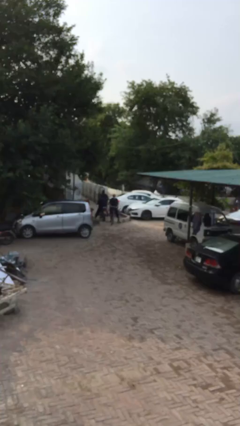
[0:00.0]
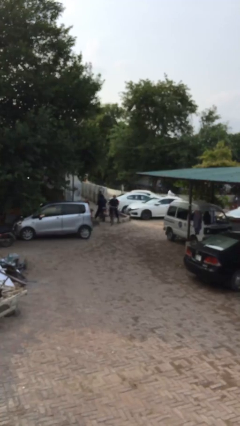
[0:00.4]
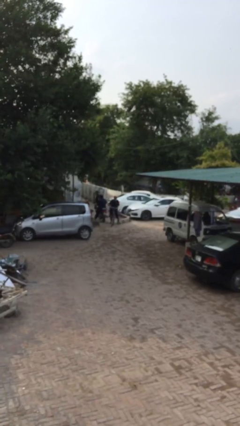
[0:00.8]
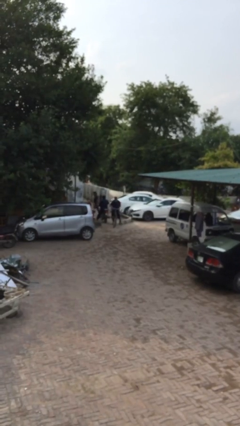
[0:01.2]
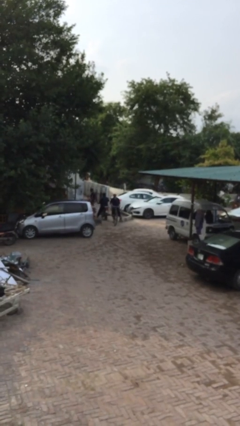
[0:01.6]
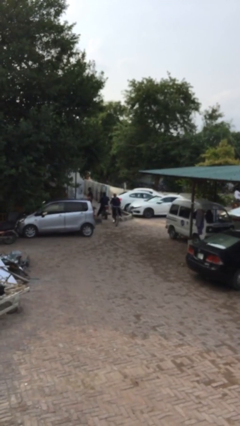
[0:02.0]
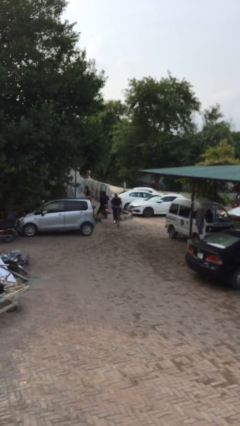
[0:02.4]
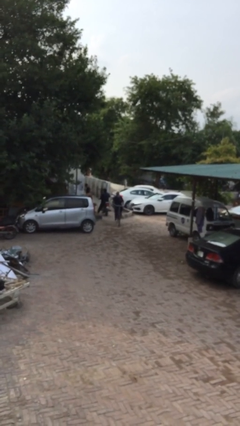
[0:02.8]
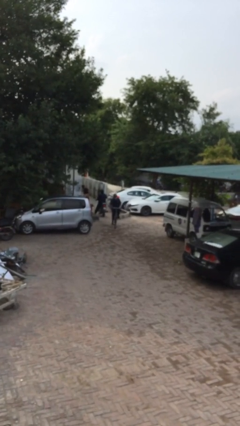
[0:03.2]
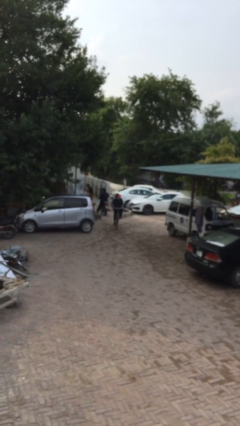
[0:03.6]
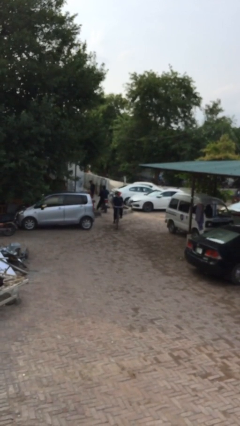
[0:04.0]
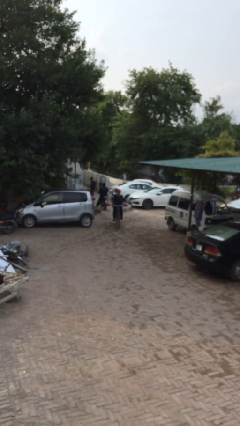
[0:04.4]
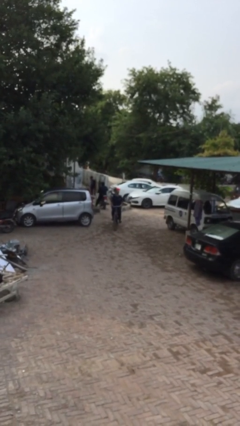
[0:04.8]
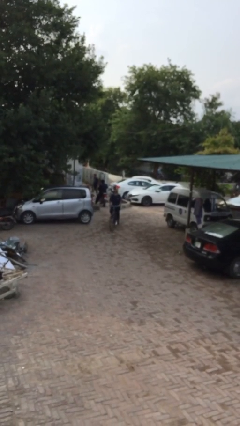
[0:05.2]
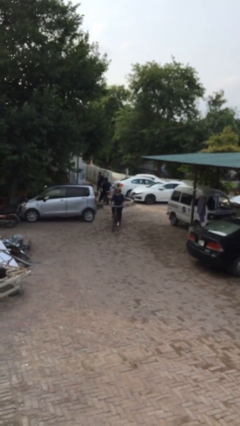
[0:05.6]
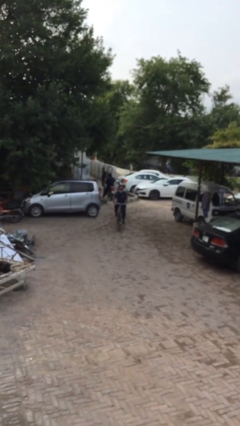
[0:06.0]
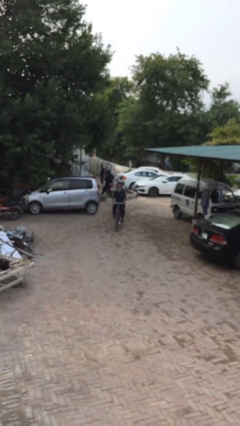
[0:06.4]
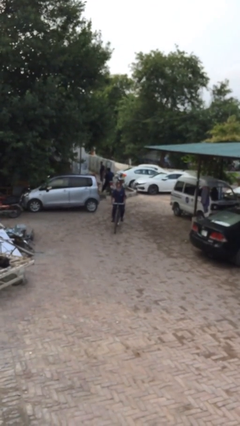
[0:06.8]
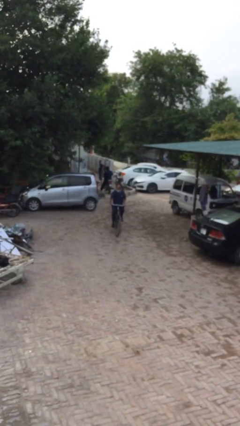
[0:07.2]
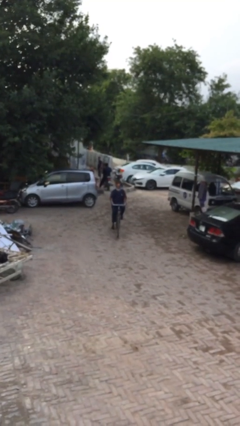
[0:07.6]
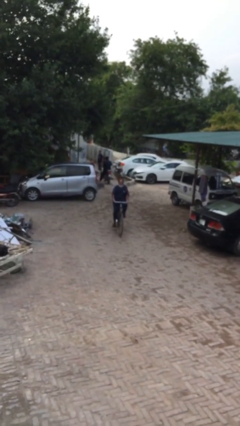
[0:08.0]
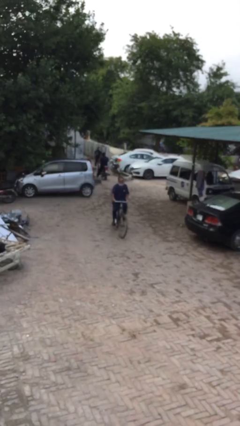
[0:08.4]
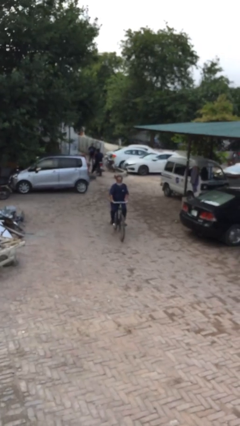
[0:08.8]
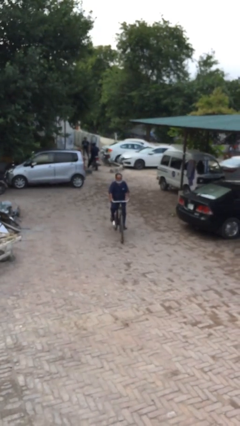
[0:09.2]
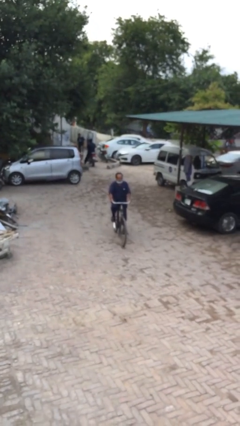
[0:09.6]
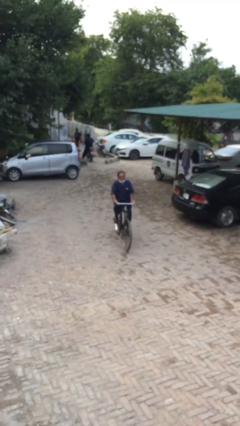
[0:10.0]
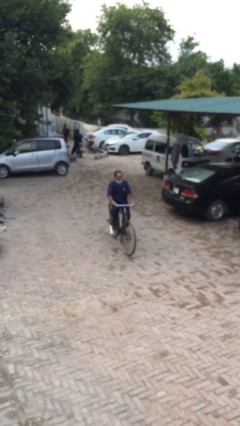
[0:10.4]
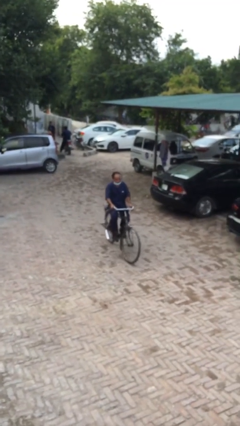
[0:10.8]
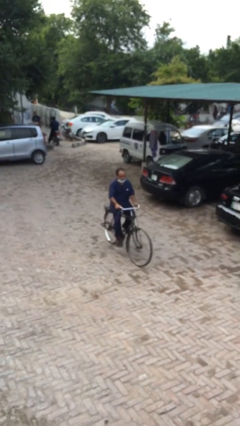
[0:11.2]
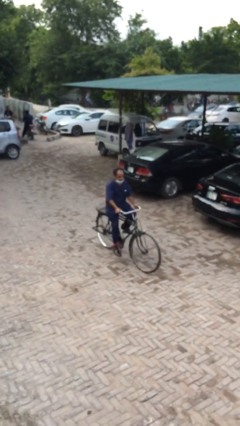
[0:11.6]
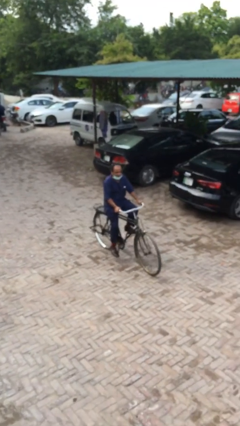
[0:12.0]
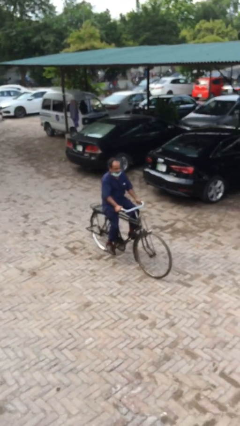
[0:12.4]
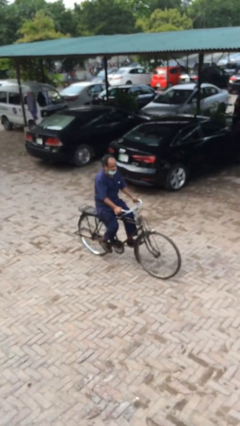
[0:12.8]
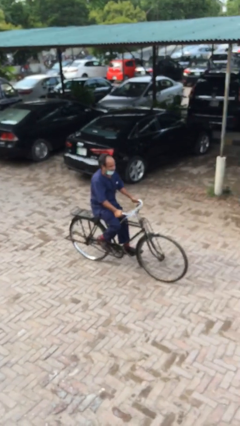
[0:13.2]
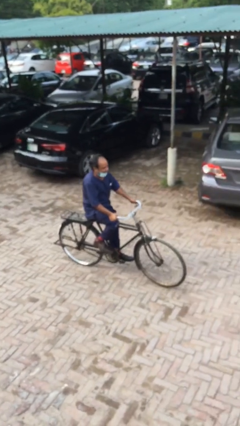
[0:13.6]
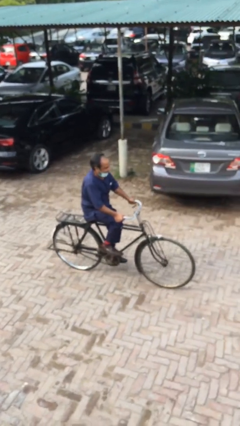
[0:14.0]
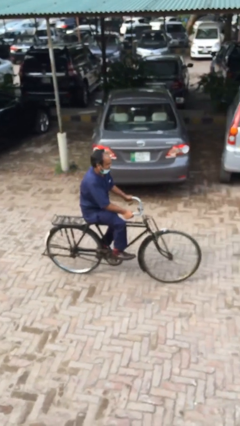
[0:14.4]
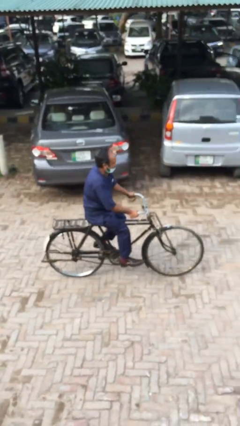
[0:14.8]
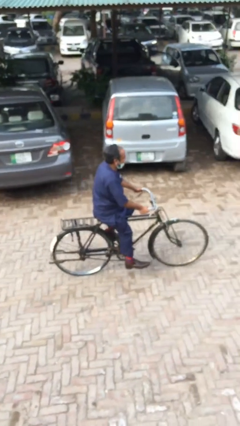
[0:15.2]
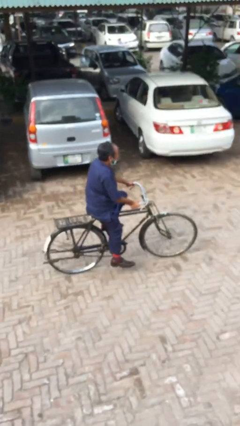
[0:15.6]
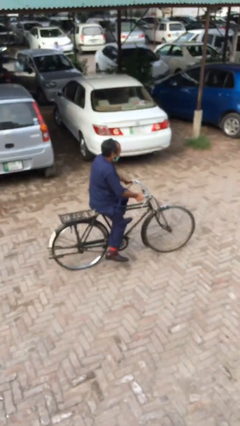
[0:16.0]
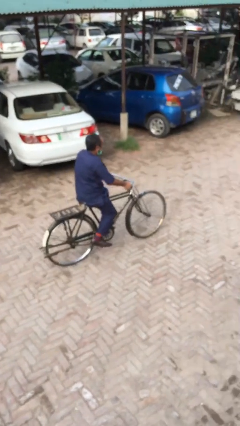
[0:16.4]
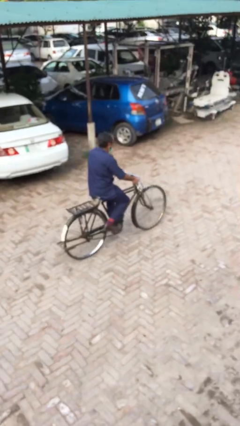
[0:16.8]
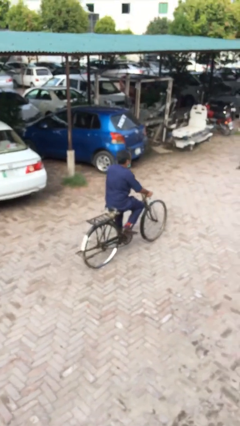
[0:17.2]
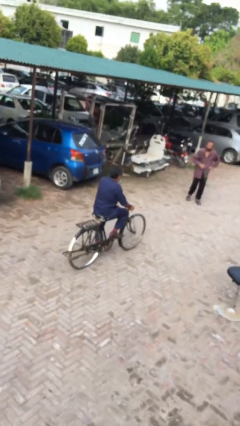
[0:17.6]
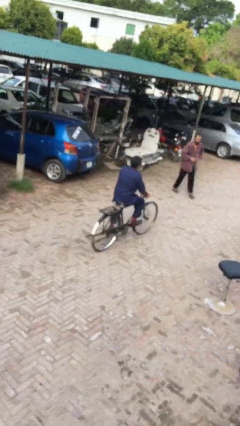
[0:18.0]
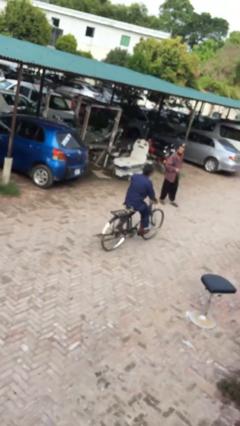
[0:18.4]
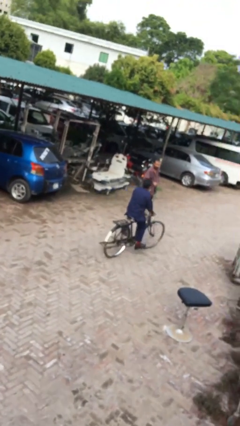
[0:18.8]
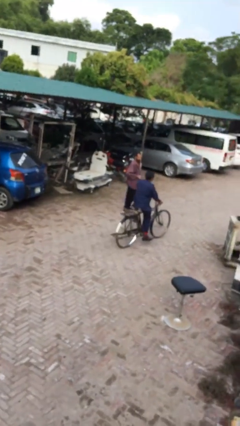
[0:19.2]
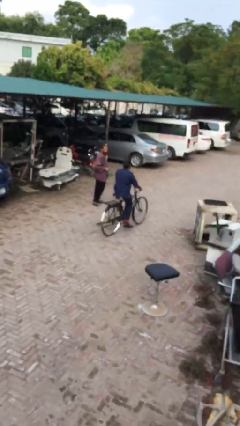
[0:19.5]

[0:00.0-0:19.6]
person rides bicycle

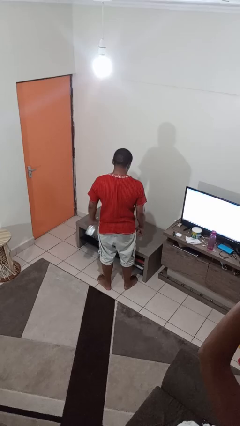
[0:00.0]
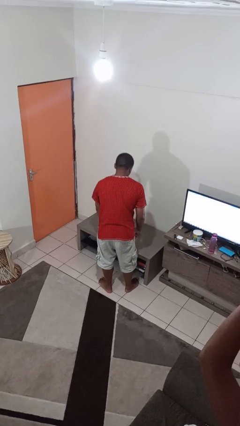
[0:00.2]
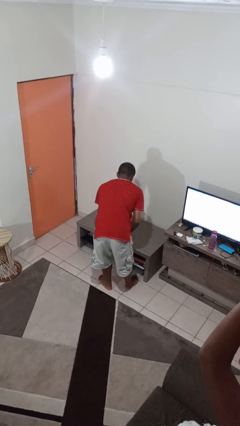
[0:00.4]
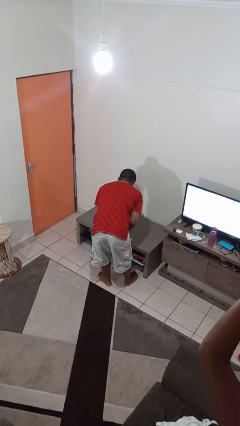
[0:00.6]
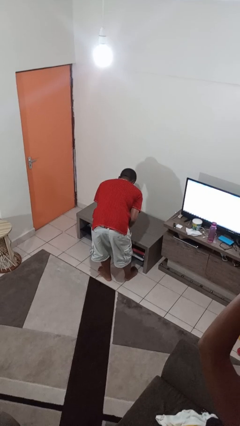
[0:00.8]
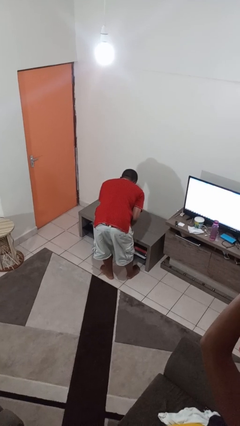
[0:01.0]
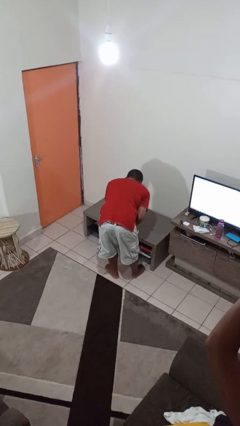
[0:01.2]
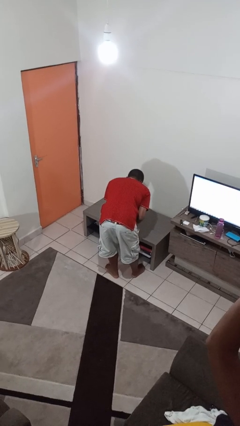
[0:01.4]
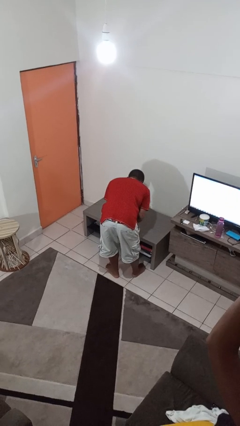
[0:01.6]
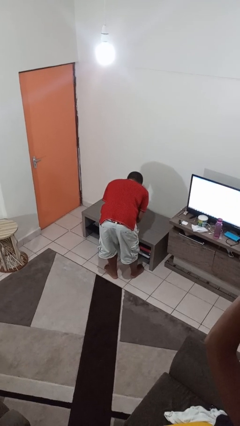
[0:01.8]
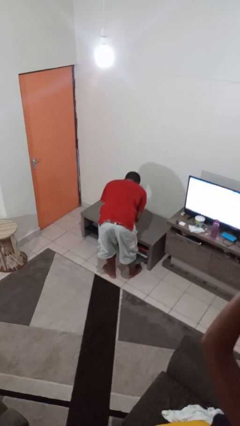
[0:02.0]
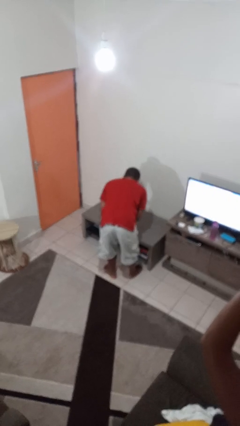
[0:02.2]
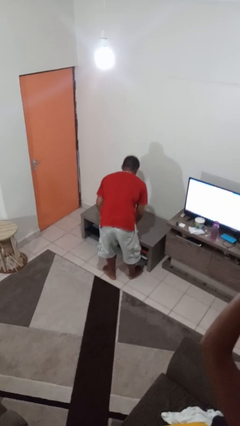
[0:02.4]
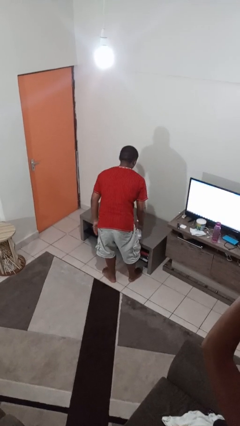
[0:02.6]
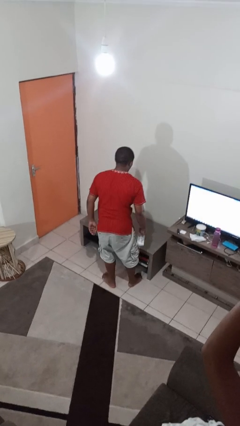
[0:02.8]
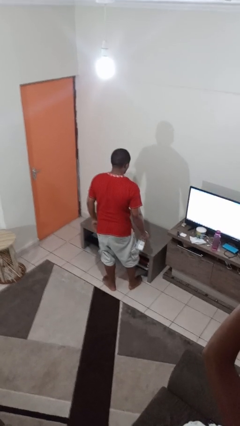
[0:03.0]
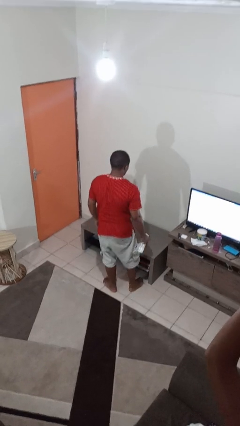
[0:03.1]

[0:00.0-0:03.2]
person sprays from bottle

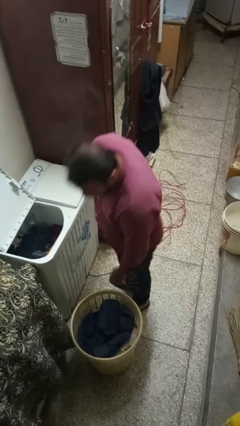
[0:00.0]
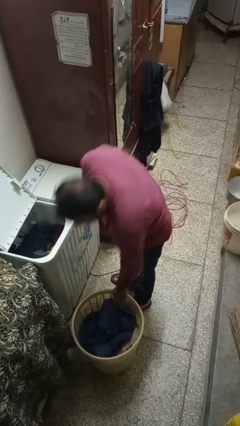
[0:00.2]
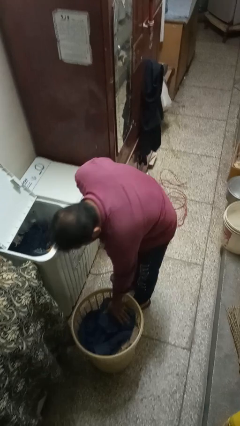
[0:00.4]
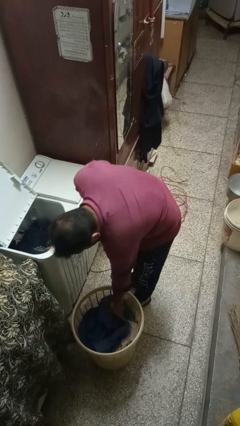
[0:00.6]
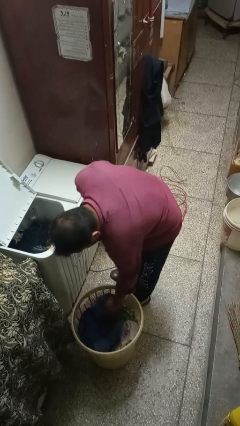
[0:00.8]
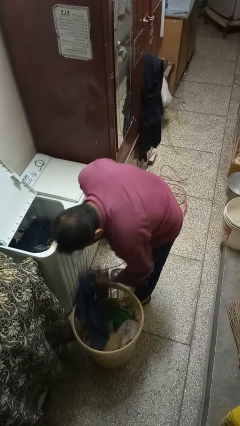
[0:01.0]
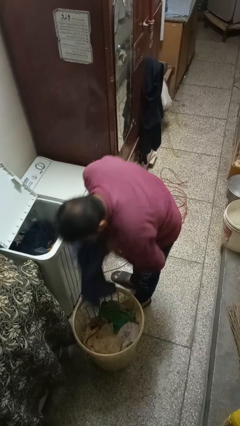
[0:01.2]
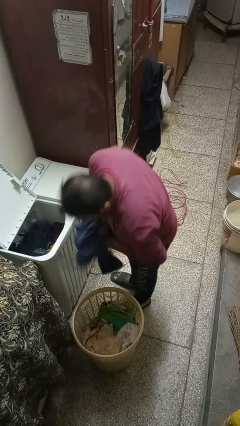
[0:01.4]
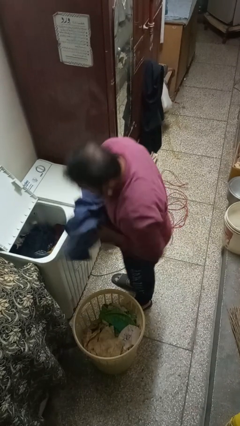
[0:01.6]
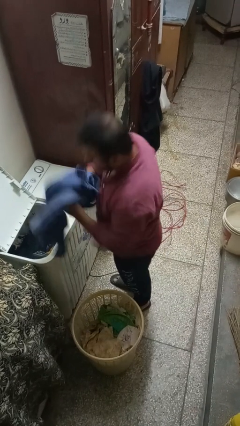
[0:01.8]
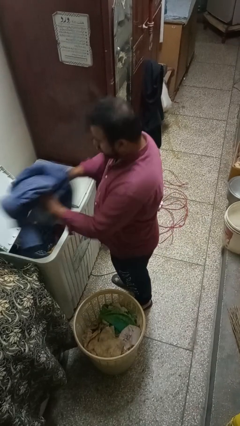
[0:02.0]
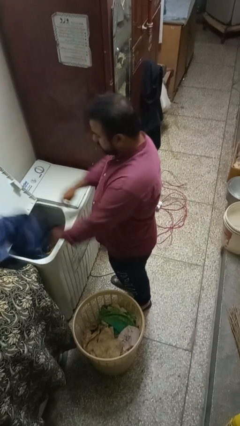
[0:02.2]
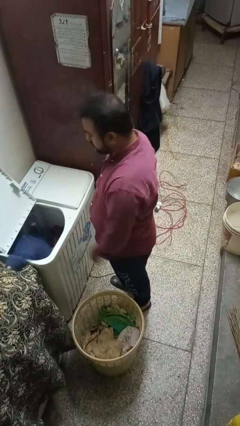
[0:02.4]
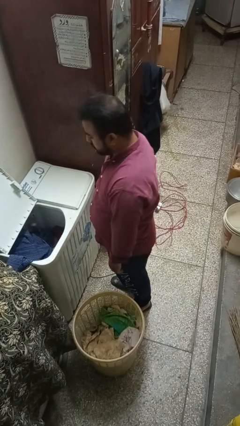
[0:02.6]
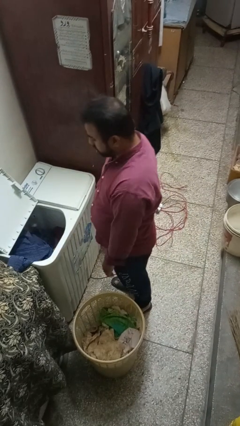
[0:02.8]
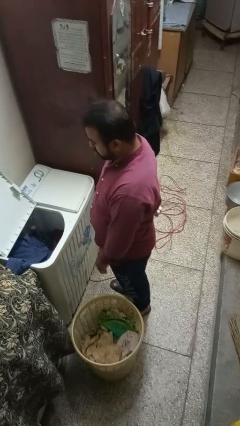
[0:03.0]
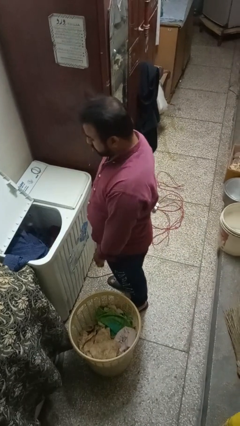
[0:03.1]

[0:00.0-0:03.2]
person loads clotheswasher

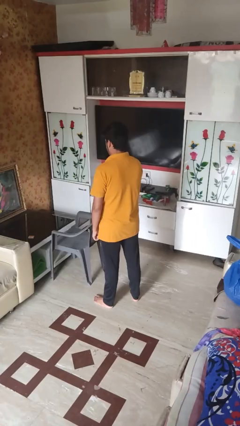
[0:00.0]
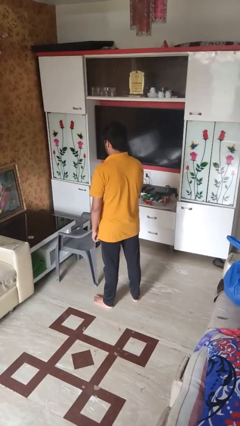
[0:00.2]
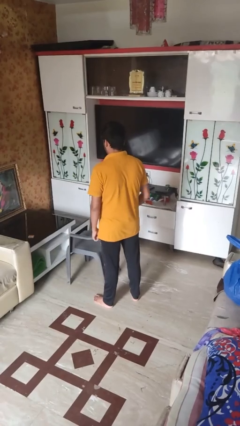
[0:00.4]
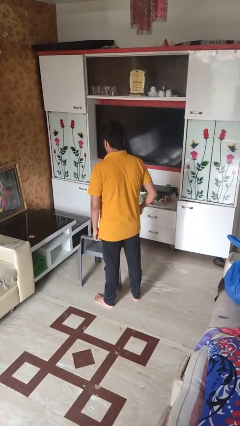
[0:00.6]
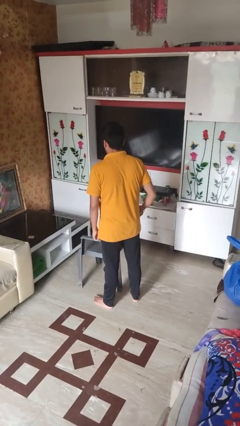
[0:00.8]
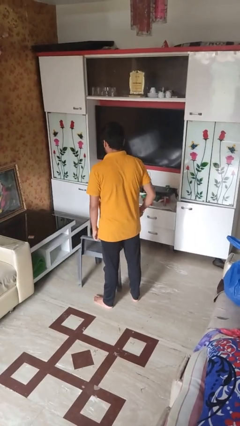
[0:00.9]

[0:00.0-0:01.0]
person pulls out chair

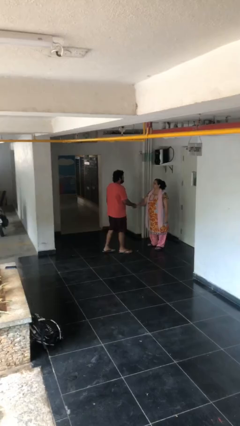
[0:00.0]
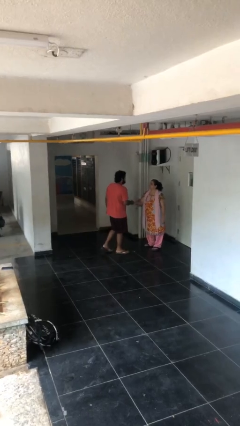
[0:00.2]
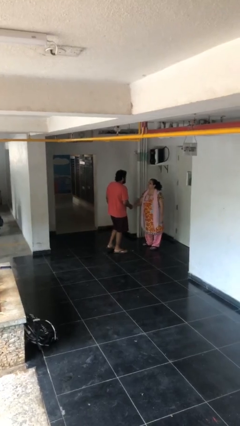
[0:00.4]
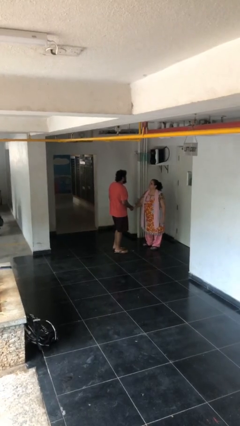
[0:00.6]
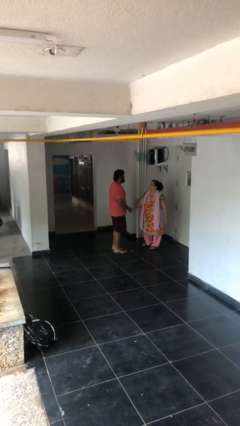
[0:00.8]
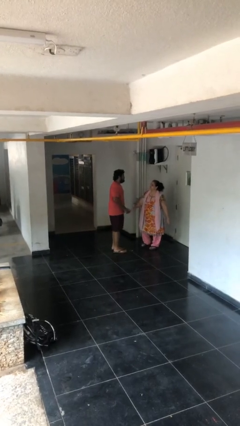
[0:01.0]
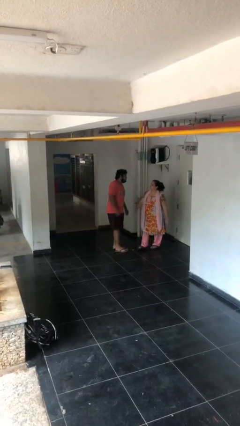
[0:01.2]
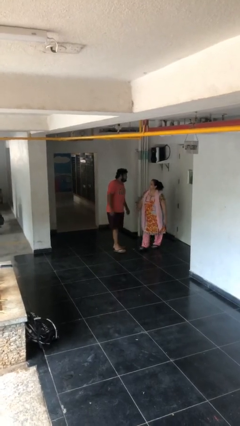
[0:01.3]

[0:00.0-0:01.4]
person shakes hand
